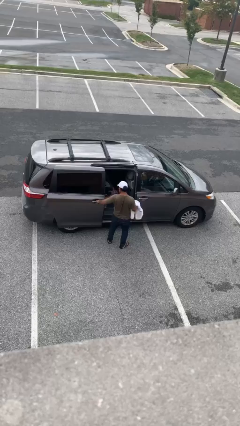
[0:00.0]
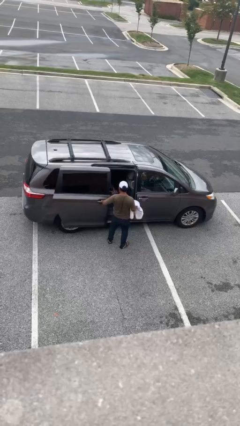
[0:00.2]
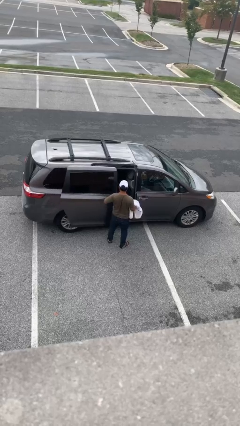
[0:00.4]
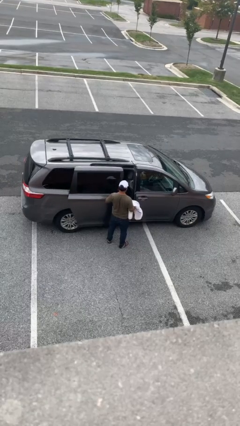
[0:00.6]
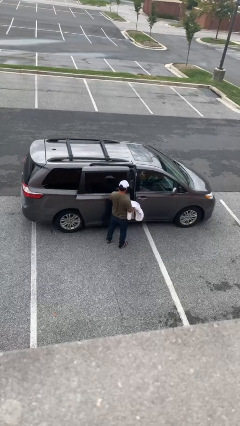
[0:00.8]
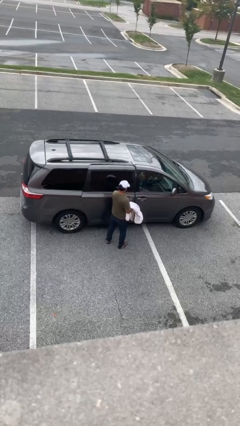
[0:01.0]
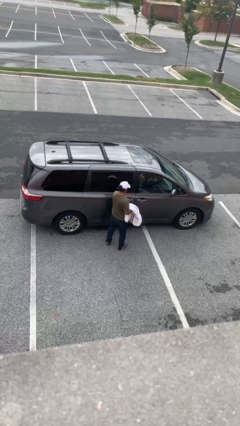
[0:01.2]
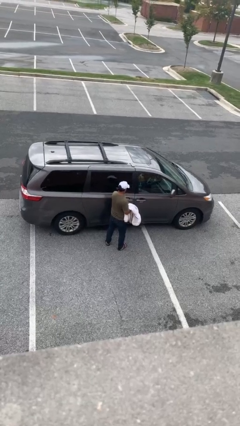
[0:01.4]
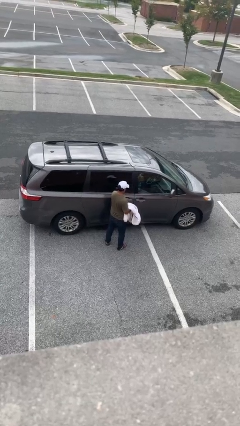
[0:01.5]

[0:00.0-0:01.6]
person closes car door

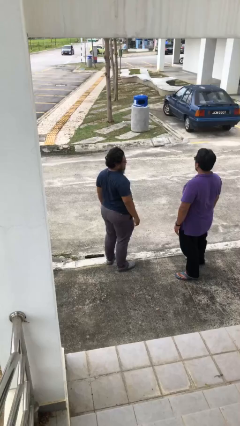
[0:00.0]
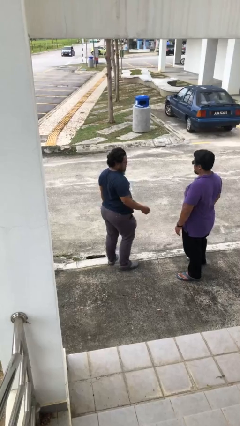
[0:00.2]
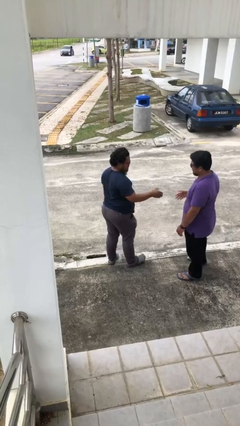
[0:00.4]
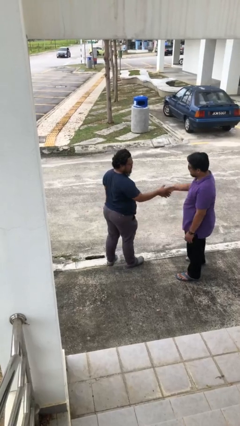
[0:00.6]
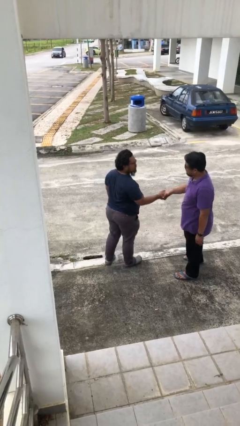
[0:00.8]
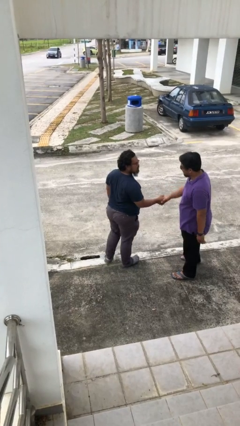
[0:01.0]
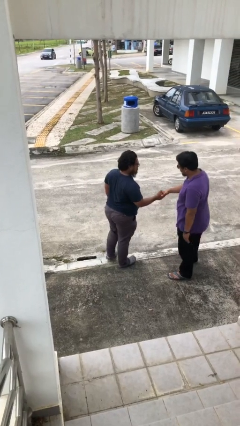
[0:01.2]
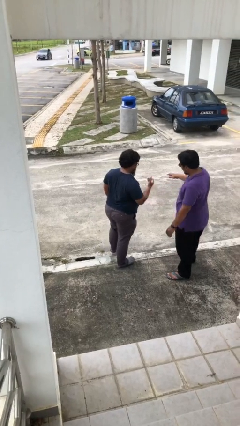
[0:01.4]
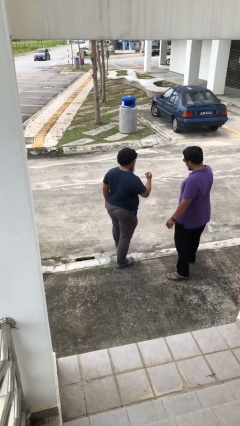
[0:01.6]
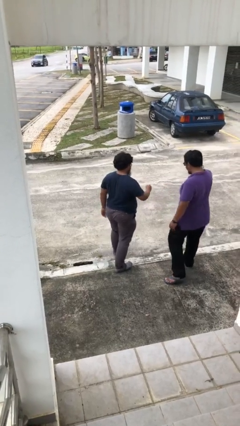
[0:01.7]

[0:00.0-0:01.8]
person shakes hand

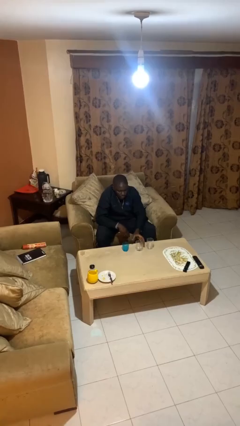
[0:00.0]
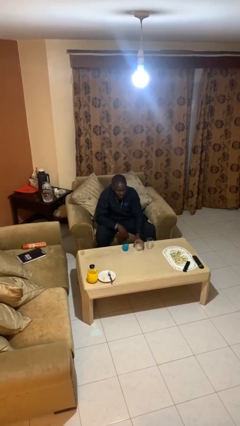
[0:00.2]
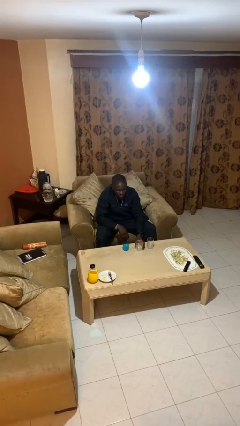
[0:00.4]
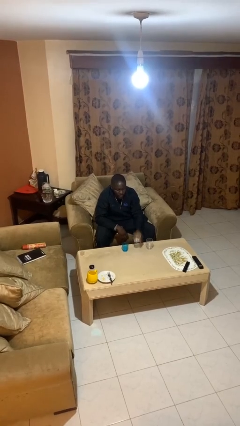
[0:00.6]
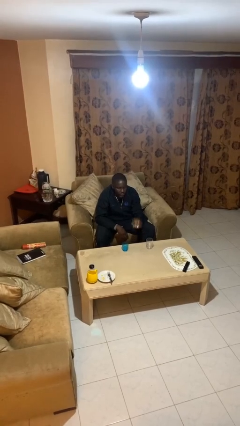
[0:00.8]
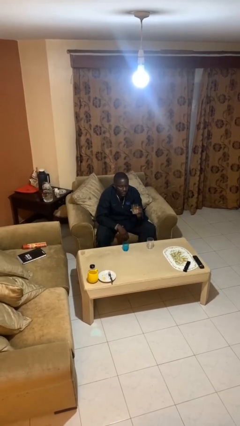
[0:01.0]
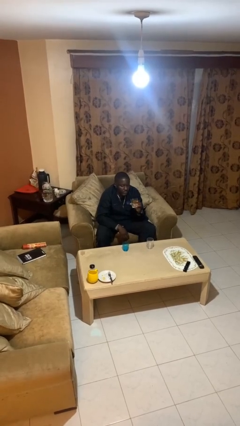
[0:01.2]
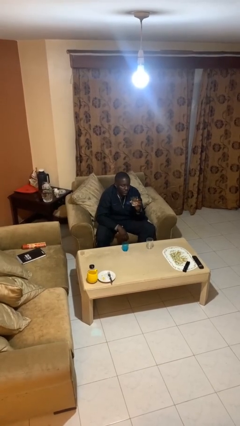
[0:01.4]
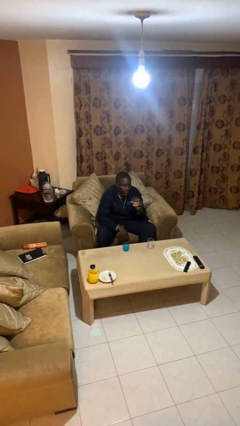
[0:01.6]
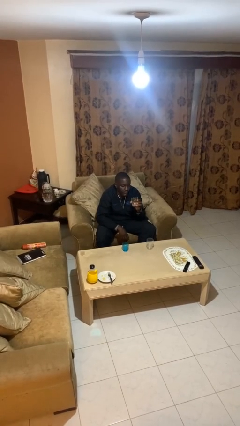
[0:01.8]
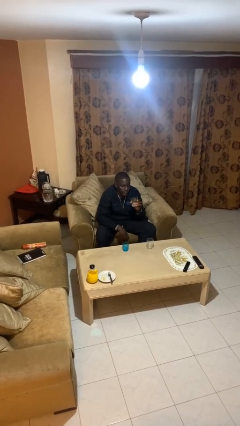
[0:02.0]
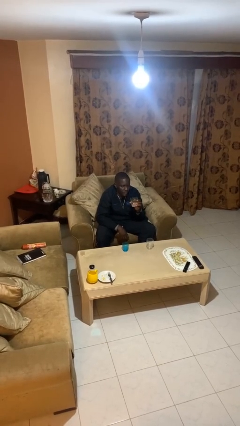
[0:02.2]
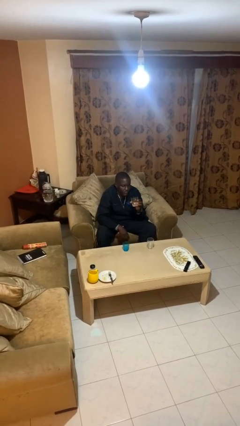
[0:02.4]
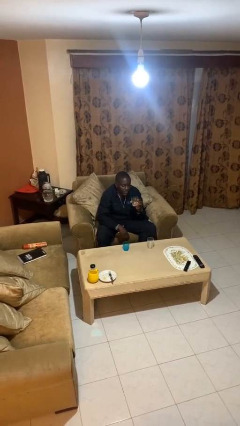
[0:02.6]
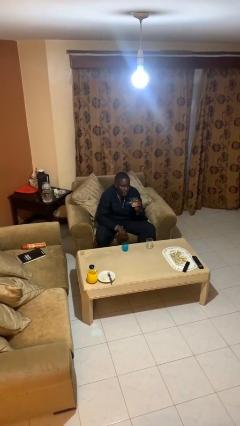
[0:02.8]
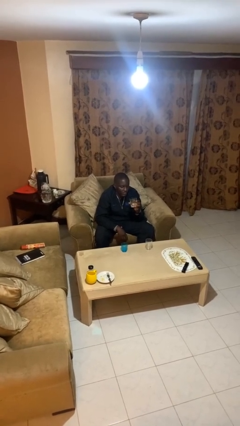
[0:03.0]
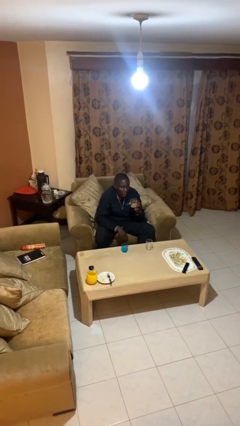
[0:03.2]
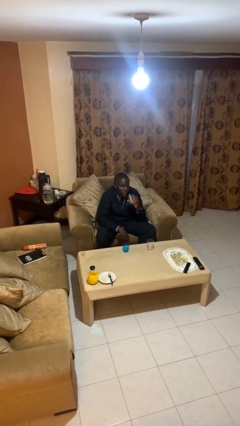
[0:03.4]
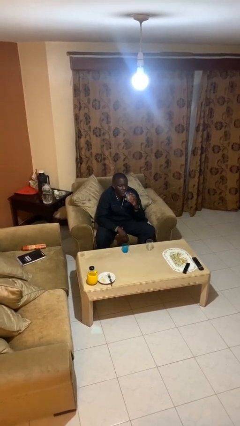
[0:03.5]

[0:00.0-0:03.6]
person picks up object from table

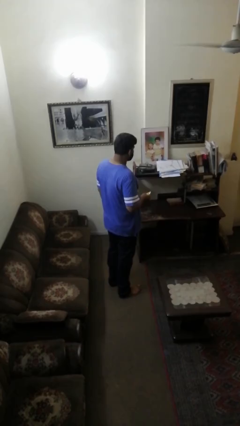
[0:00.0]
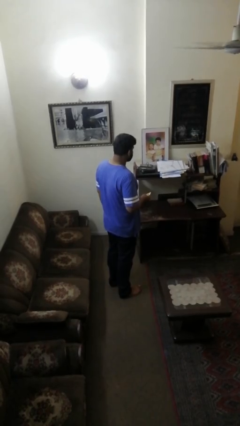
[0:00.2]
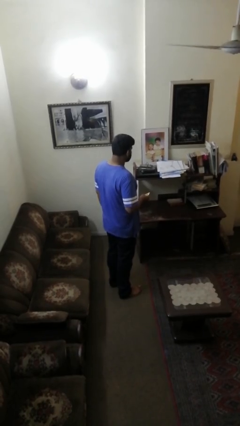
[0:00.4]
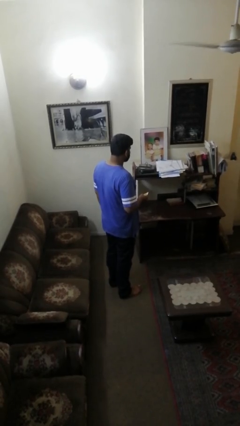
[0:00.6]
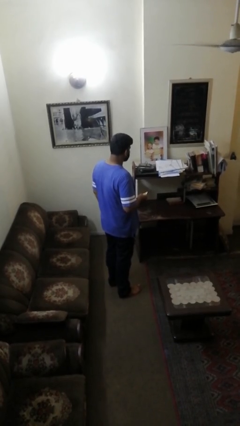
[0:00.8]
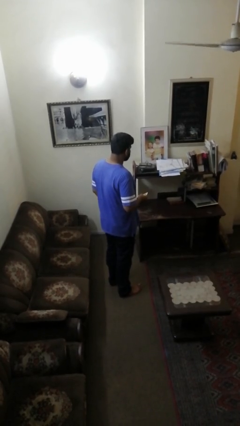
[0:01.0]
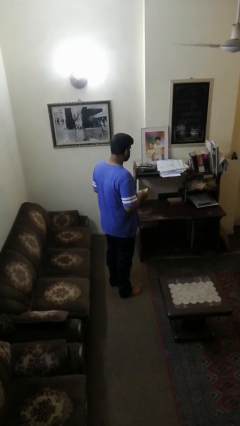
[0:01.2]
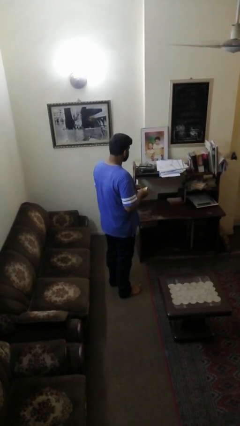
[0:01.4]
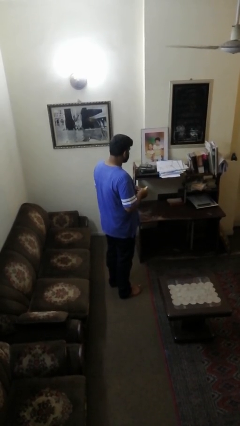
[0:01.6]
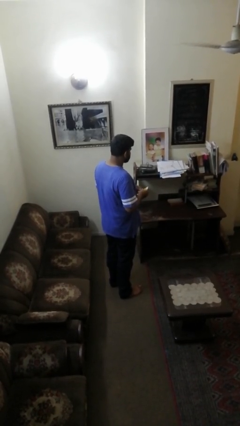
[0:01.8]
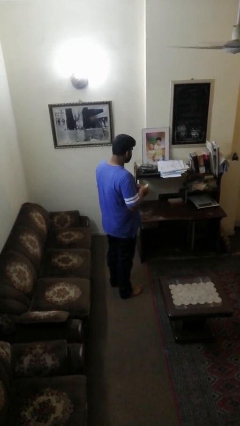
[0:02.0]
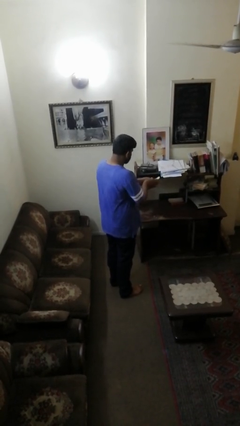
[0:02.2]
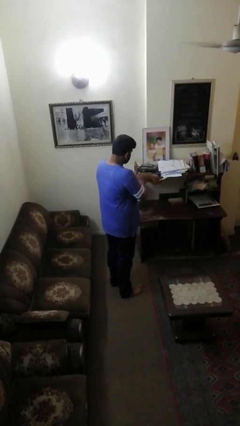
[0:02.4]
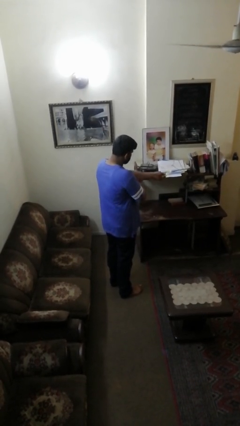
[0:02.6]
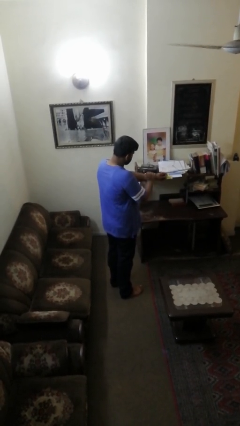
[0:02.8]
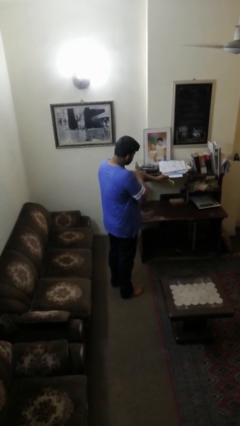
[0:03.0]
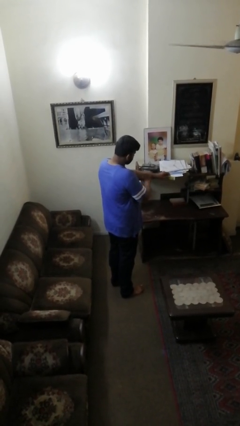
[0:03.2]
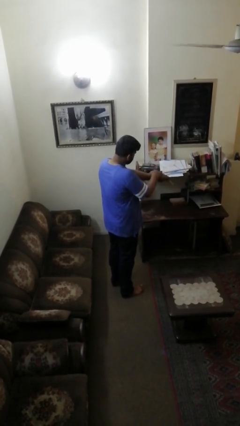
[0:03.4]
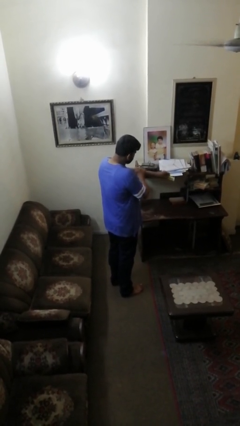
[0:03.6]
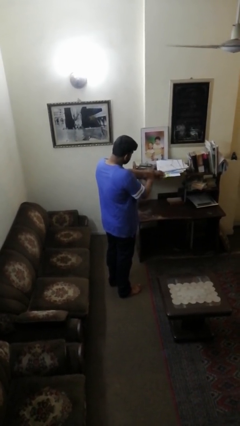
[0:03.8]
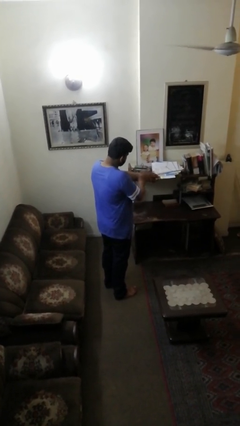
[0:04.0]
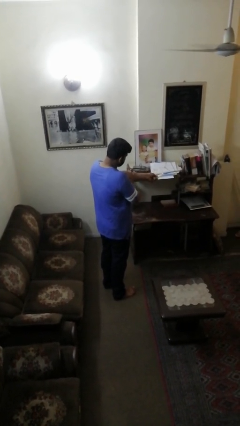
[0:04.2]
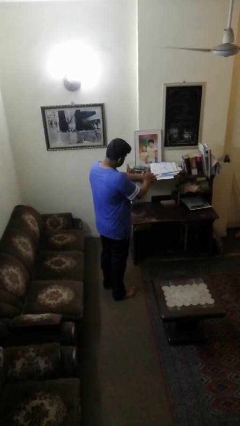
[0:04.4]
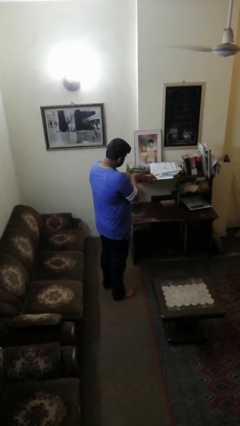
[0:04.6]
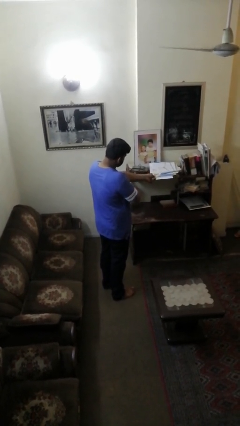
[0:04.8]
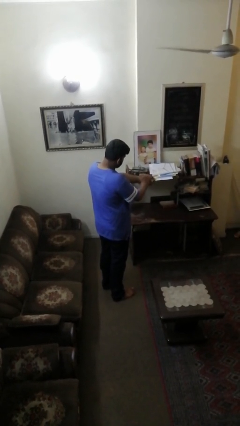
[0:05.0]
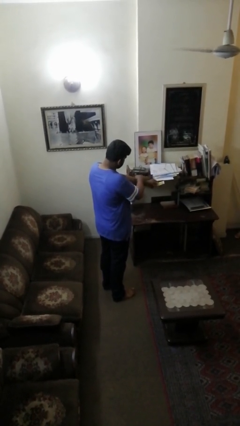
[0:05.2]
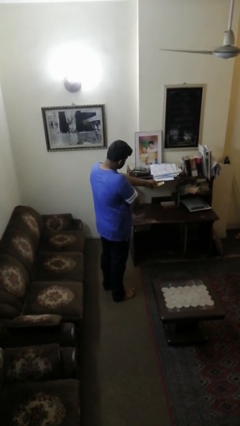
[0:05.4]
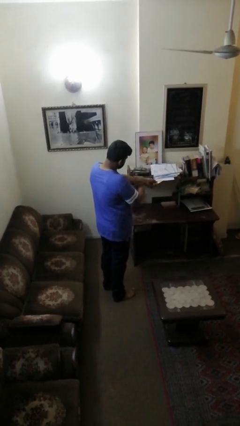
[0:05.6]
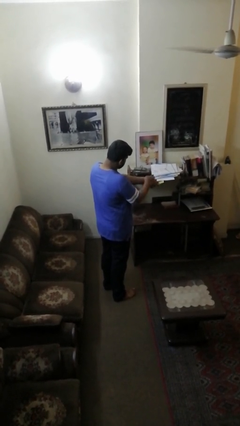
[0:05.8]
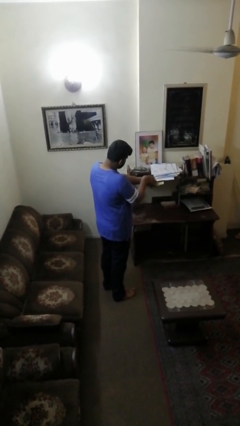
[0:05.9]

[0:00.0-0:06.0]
person applies sunscreen

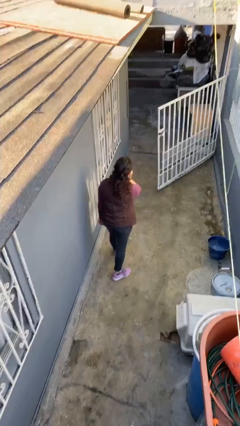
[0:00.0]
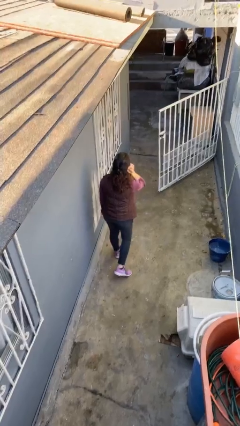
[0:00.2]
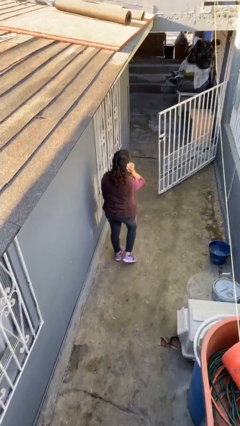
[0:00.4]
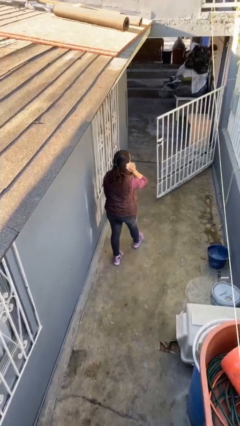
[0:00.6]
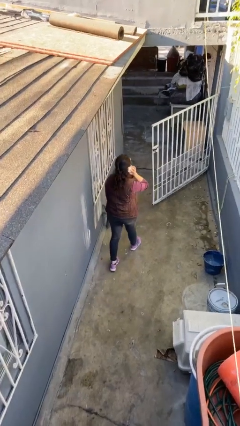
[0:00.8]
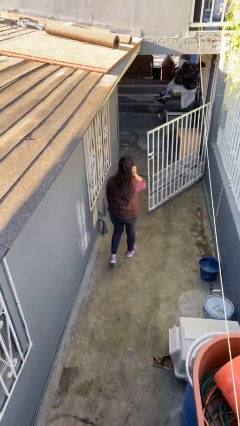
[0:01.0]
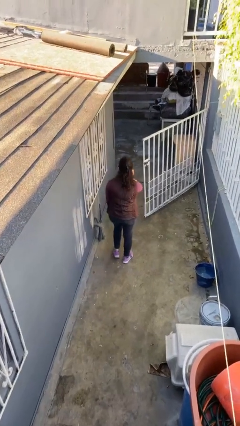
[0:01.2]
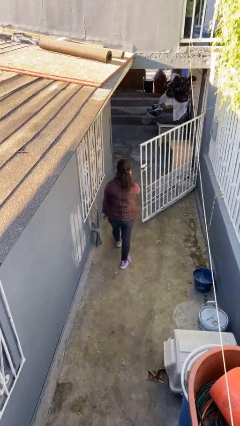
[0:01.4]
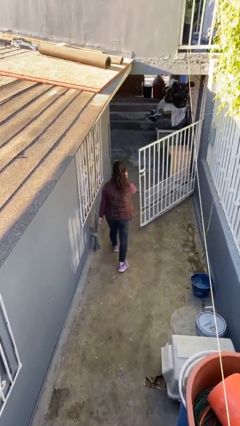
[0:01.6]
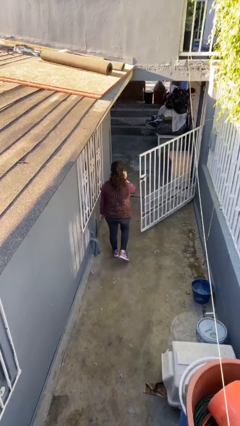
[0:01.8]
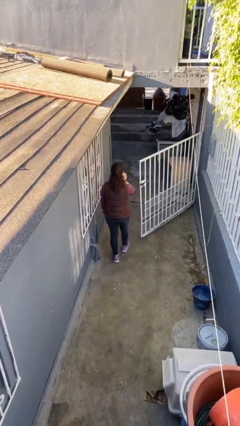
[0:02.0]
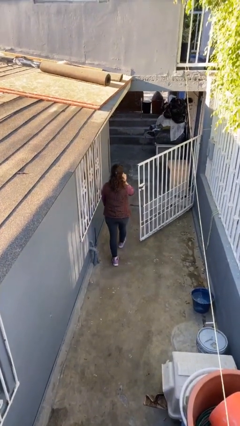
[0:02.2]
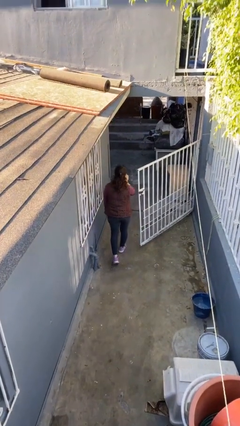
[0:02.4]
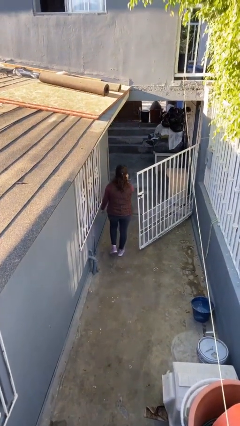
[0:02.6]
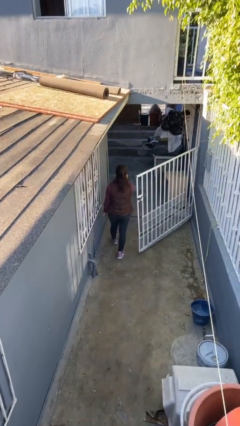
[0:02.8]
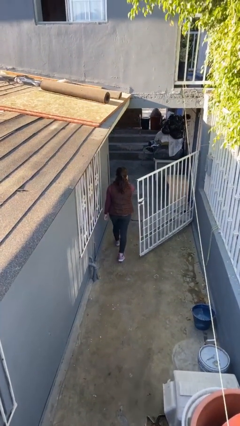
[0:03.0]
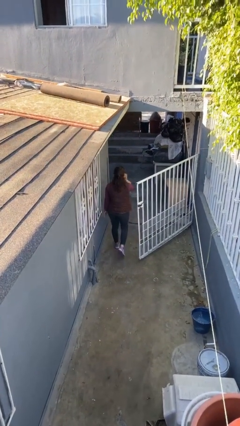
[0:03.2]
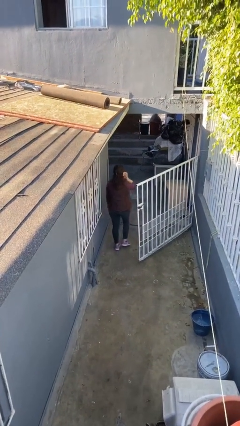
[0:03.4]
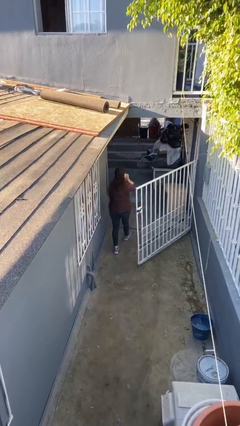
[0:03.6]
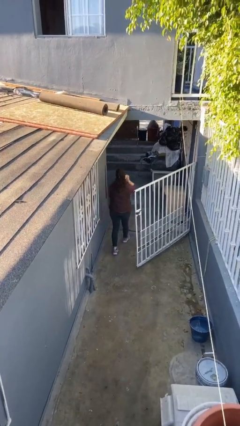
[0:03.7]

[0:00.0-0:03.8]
person exits scene through structure

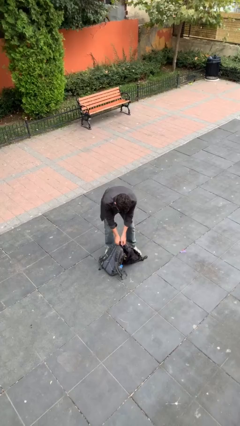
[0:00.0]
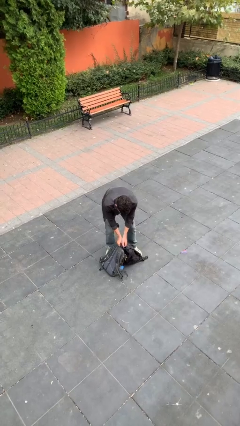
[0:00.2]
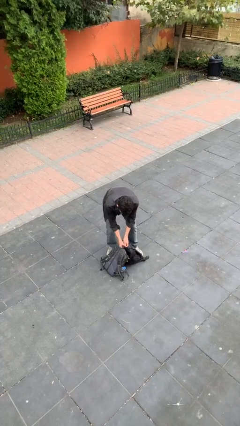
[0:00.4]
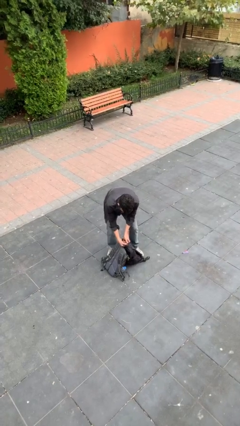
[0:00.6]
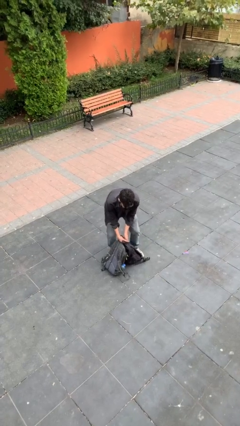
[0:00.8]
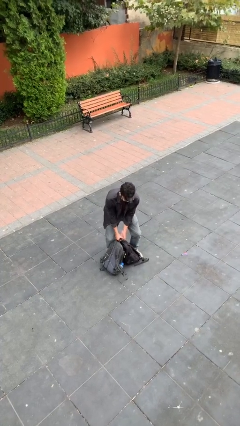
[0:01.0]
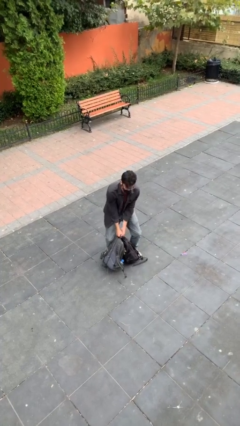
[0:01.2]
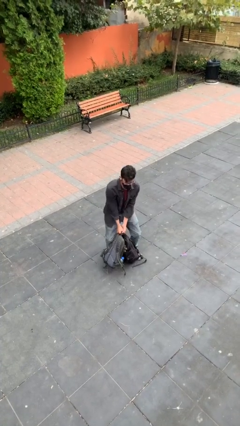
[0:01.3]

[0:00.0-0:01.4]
person picks up object from floor
